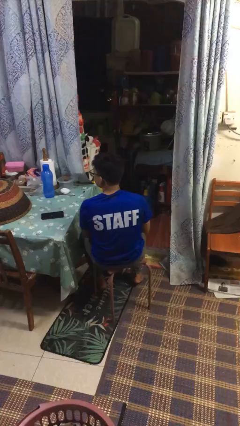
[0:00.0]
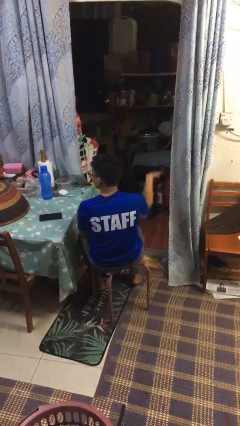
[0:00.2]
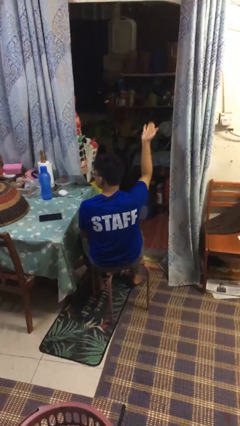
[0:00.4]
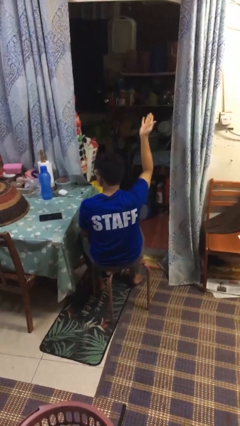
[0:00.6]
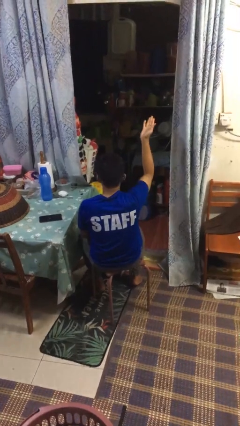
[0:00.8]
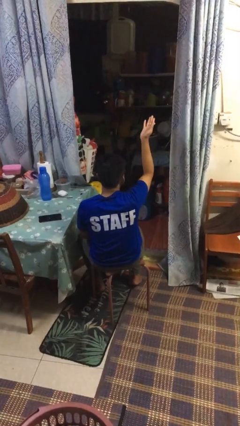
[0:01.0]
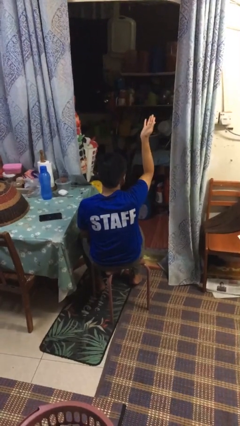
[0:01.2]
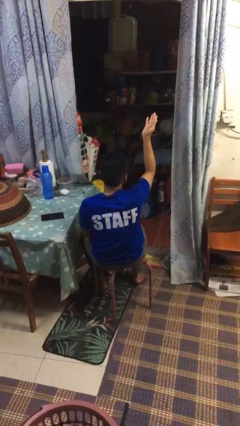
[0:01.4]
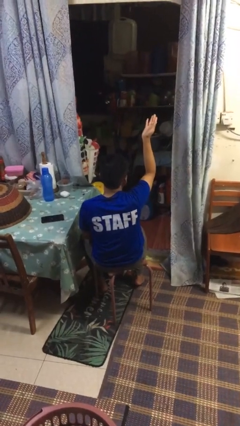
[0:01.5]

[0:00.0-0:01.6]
person gestures swipe up

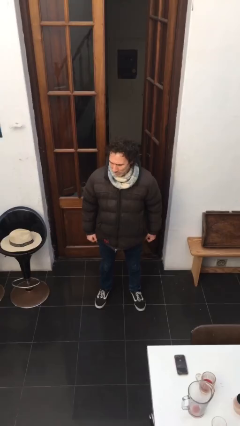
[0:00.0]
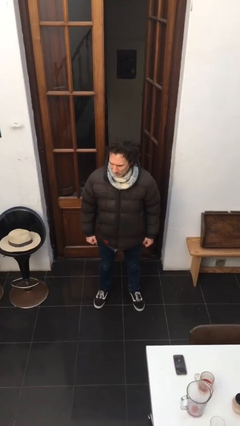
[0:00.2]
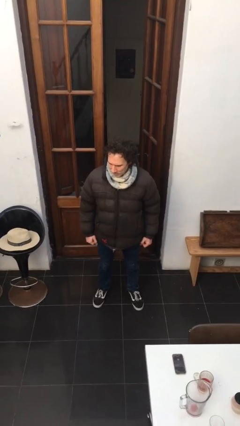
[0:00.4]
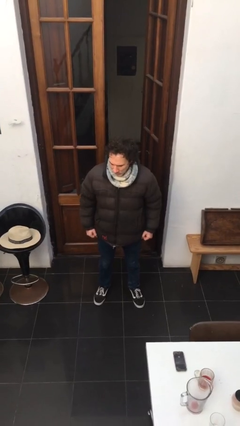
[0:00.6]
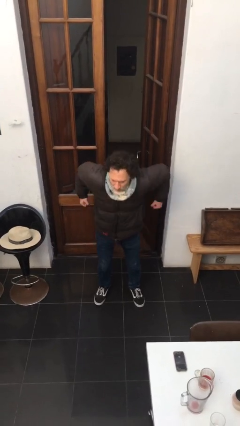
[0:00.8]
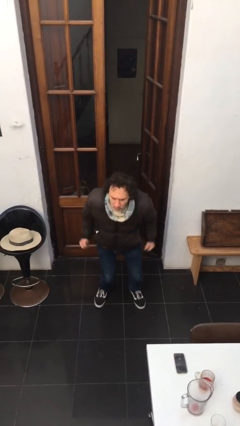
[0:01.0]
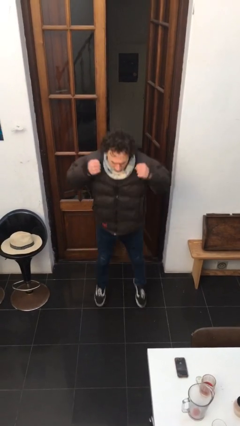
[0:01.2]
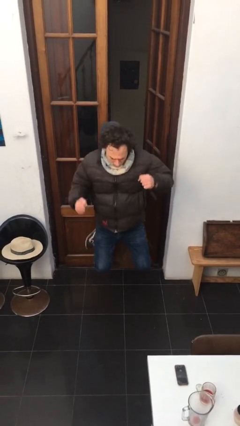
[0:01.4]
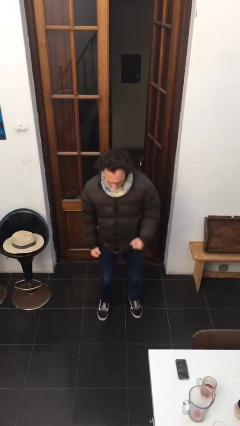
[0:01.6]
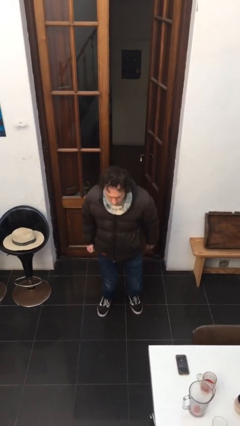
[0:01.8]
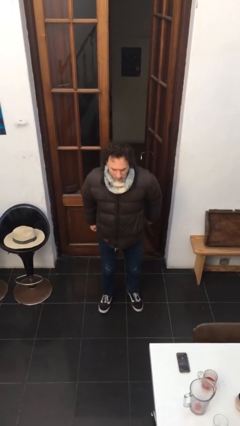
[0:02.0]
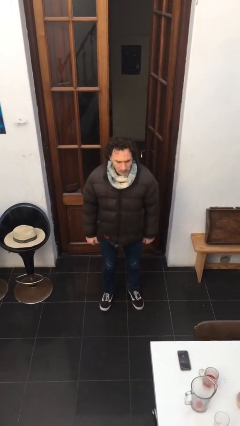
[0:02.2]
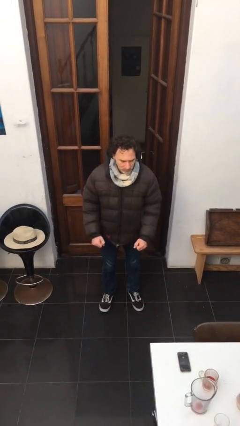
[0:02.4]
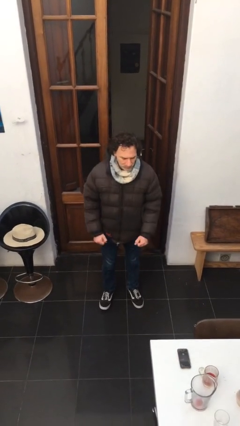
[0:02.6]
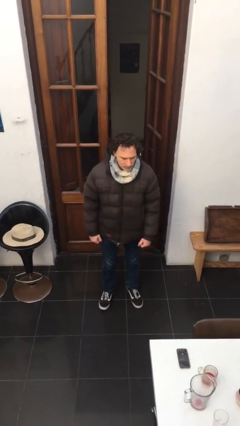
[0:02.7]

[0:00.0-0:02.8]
person jumps

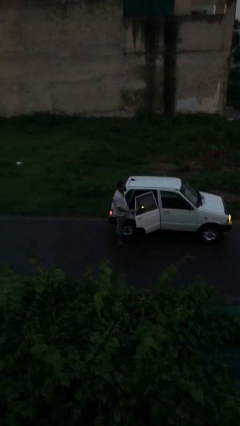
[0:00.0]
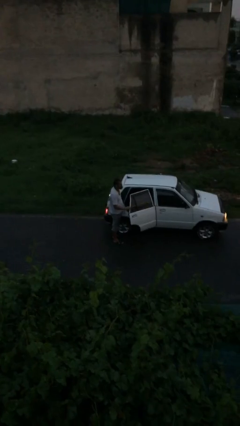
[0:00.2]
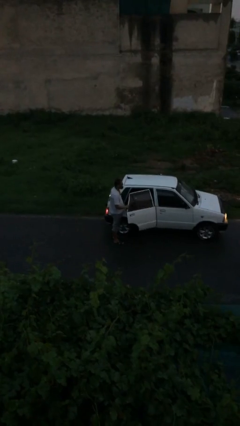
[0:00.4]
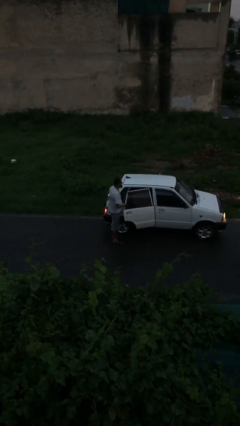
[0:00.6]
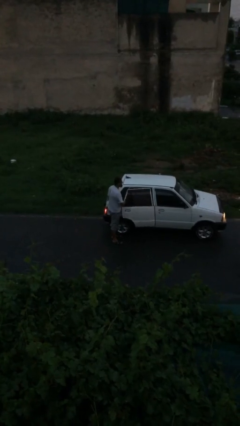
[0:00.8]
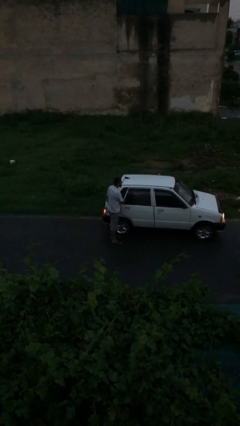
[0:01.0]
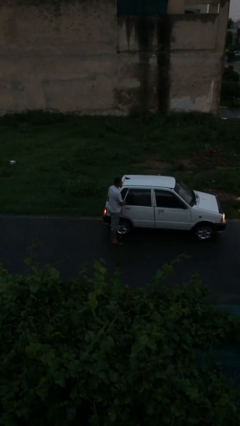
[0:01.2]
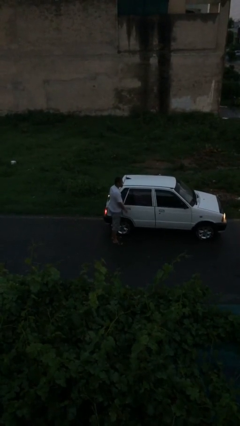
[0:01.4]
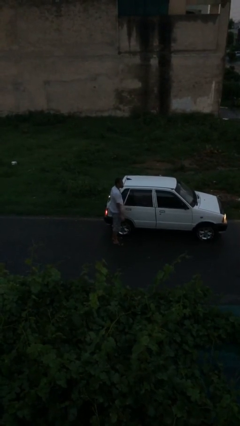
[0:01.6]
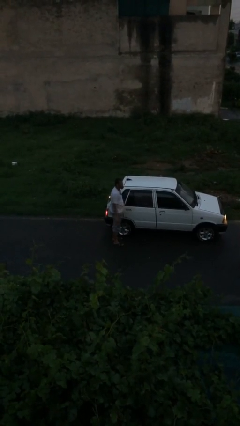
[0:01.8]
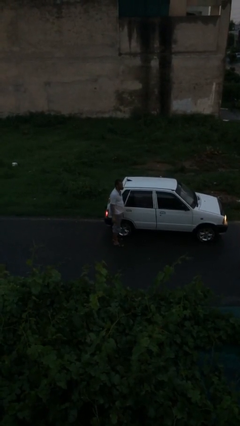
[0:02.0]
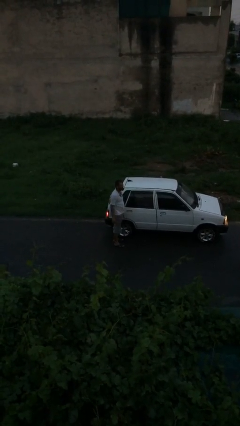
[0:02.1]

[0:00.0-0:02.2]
person closes car door

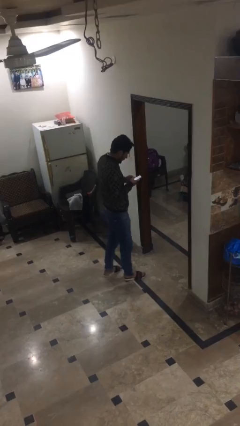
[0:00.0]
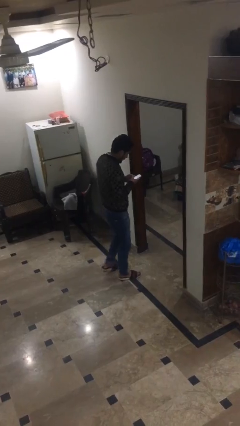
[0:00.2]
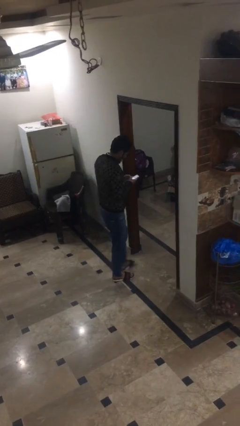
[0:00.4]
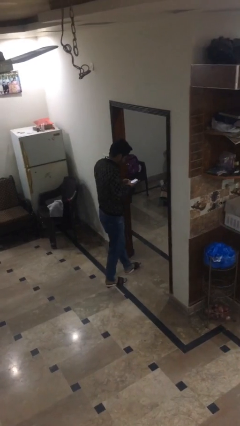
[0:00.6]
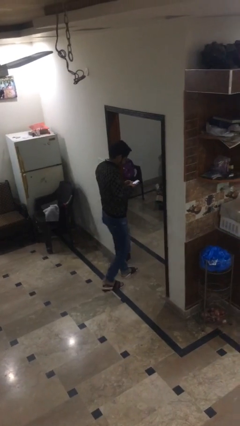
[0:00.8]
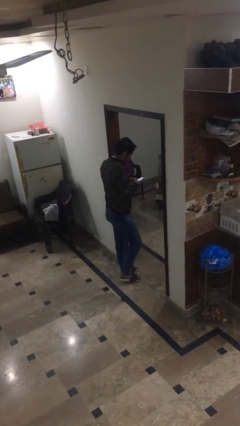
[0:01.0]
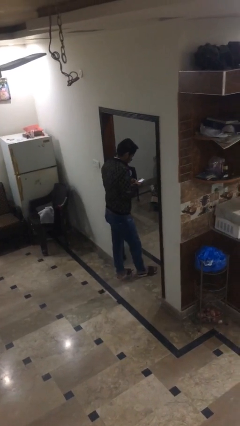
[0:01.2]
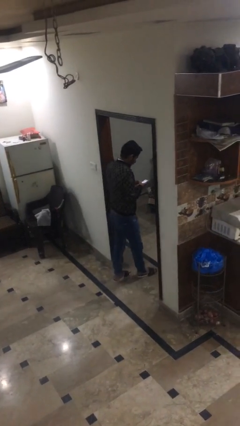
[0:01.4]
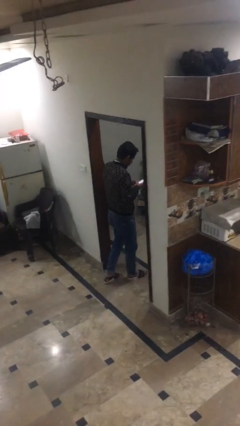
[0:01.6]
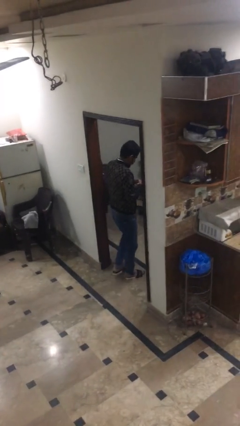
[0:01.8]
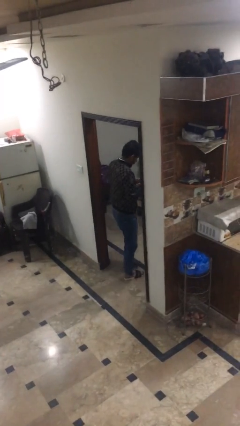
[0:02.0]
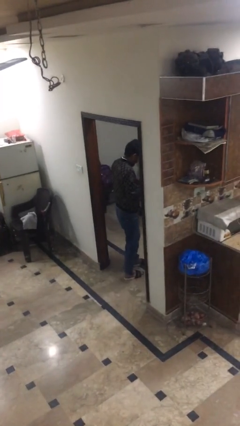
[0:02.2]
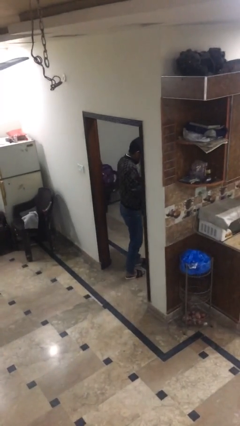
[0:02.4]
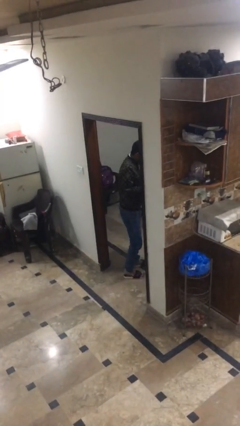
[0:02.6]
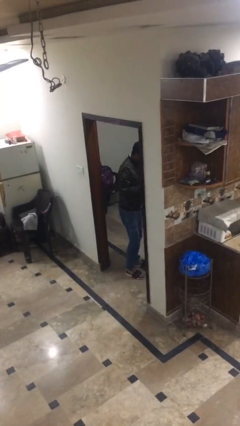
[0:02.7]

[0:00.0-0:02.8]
person enters scene through structure

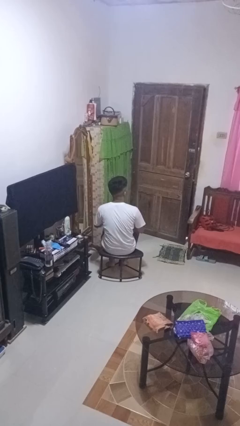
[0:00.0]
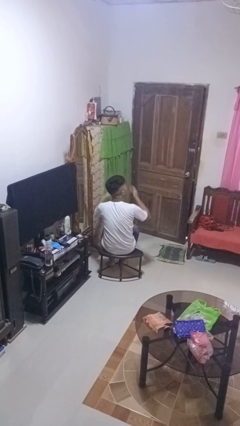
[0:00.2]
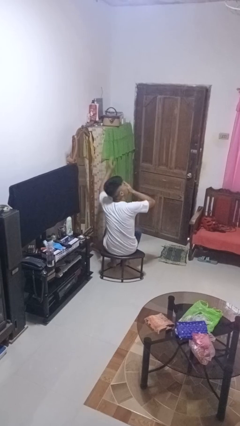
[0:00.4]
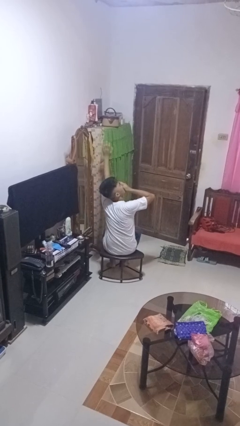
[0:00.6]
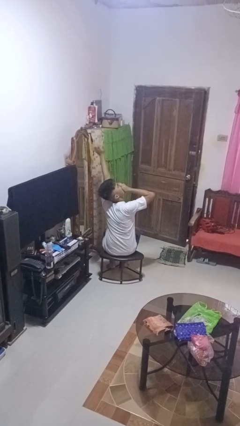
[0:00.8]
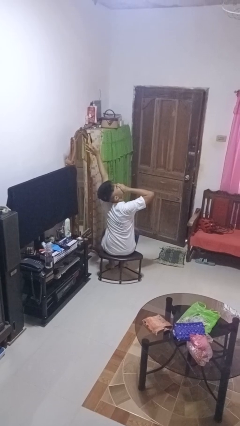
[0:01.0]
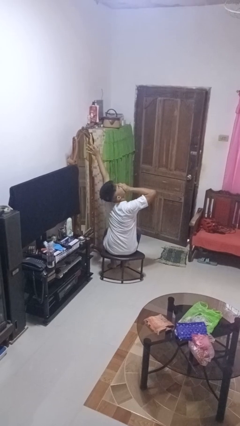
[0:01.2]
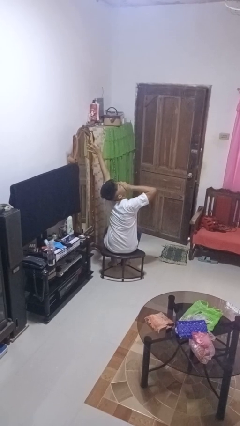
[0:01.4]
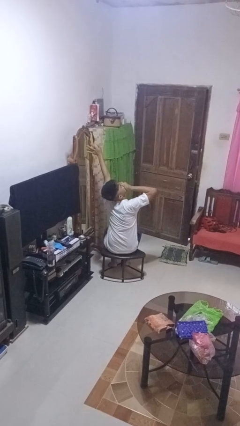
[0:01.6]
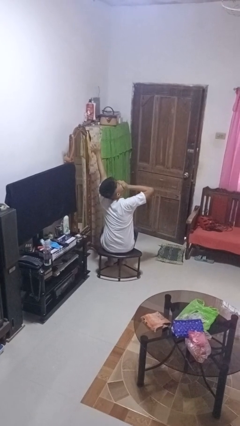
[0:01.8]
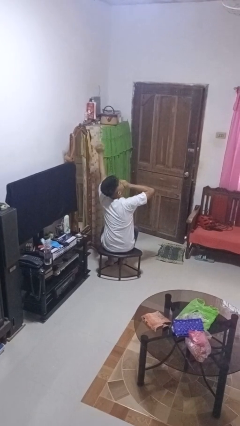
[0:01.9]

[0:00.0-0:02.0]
person yawns

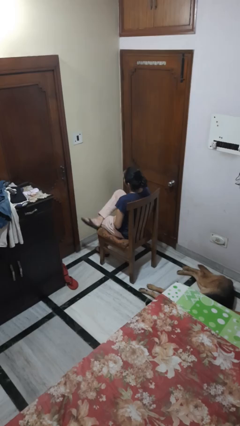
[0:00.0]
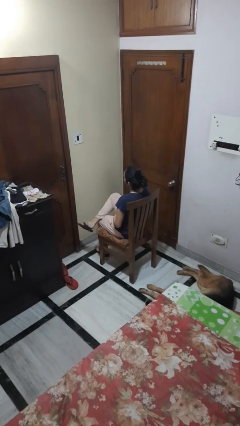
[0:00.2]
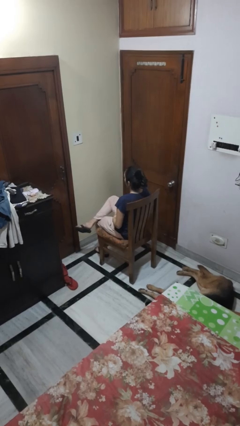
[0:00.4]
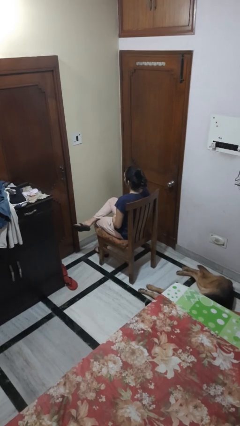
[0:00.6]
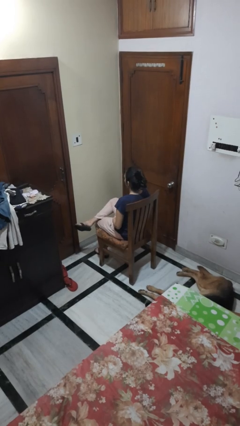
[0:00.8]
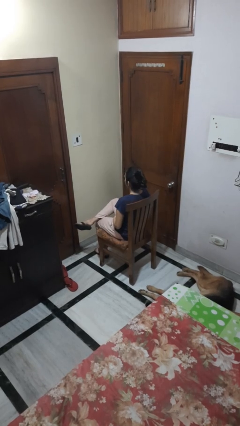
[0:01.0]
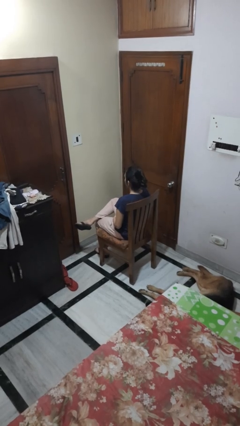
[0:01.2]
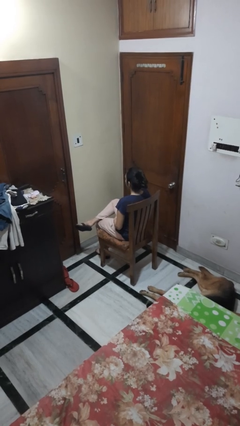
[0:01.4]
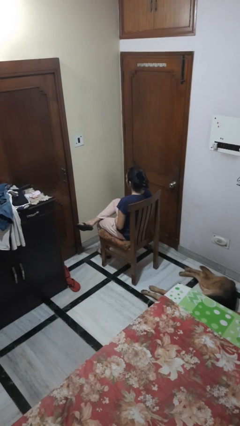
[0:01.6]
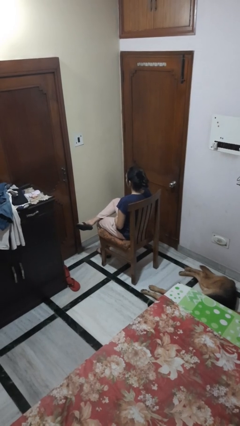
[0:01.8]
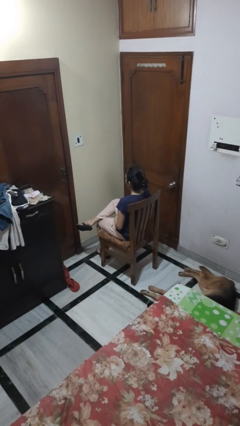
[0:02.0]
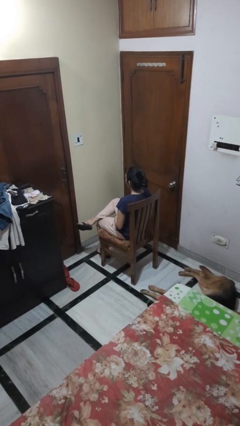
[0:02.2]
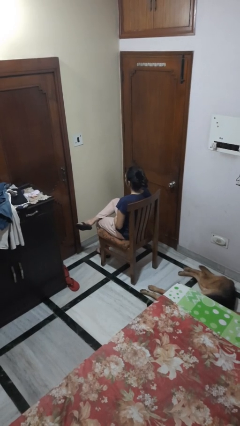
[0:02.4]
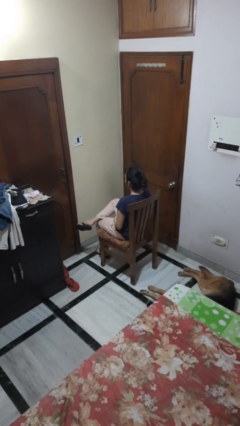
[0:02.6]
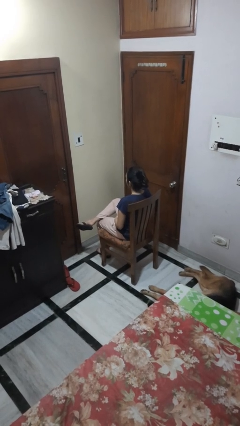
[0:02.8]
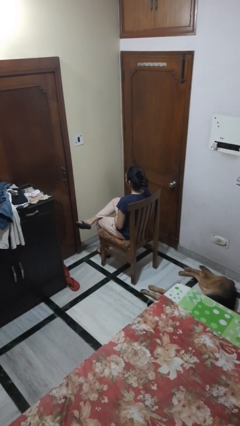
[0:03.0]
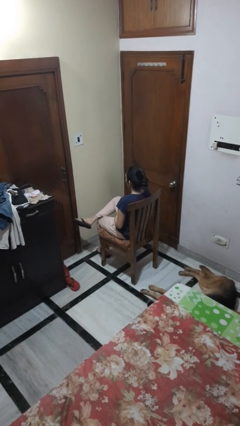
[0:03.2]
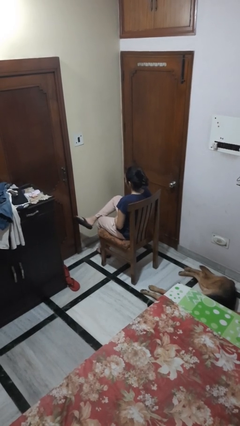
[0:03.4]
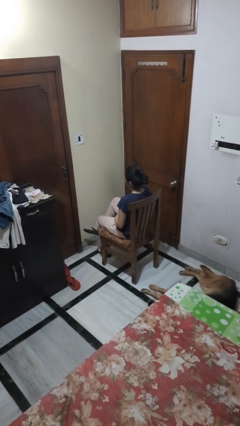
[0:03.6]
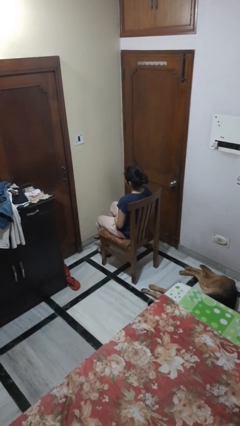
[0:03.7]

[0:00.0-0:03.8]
person crosses legs

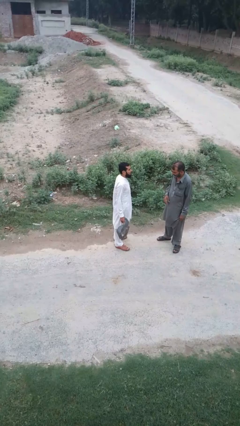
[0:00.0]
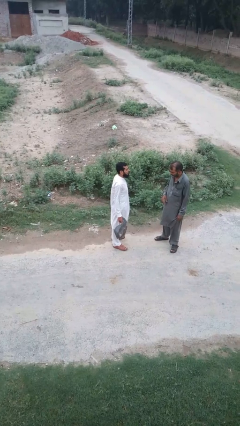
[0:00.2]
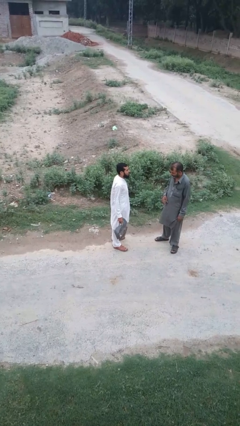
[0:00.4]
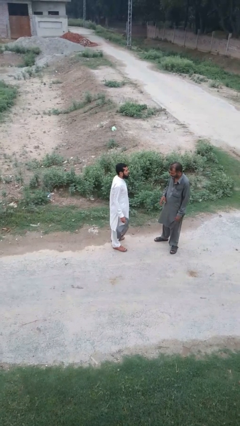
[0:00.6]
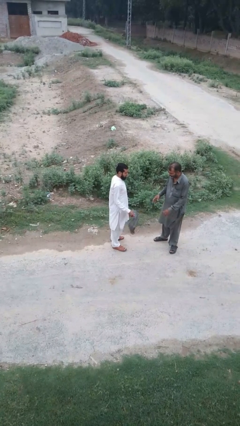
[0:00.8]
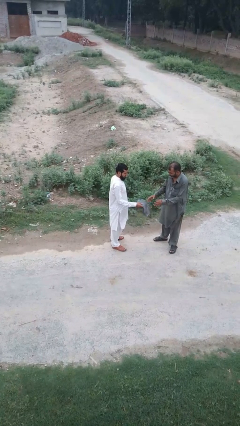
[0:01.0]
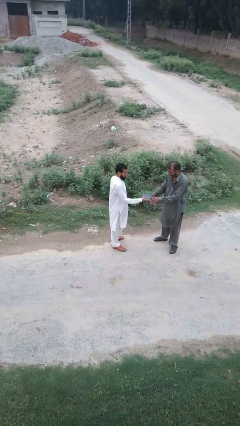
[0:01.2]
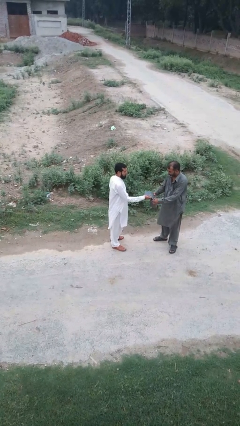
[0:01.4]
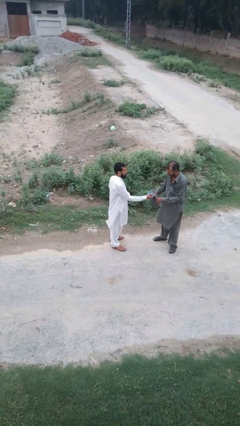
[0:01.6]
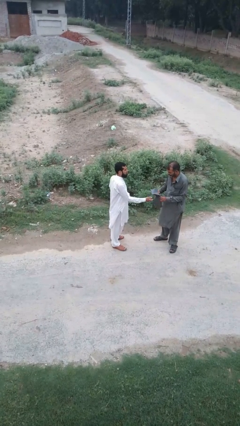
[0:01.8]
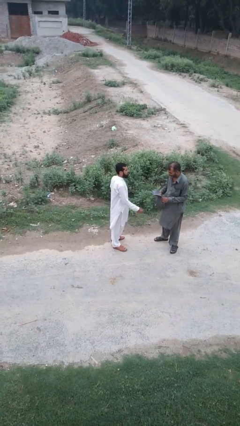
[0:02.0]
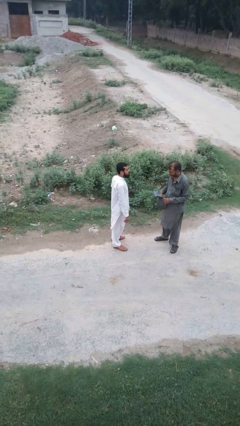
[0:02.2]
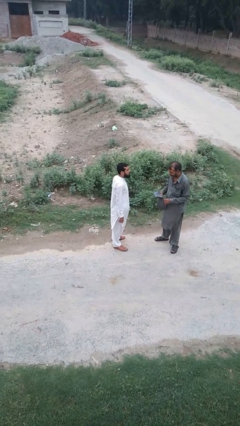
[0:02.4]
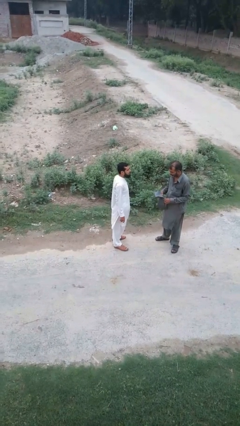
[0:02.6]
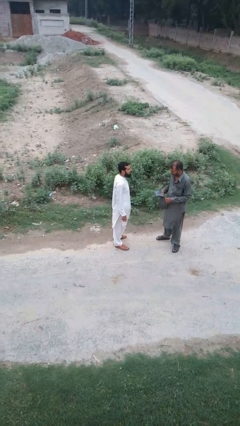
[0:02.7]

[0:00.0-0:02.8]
person transfers object to person
